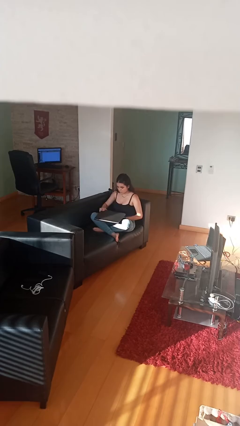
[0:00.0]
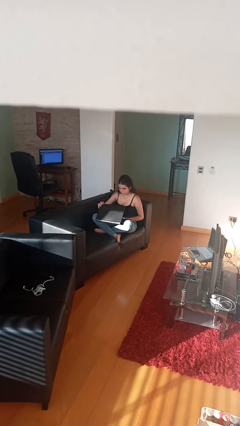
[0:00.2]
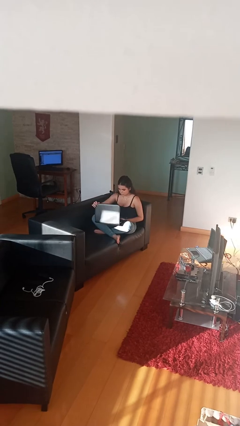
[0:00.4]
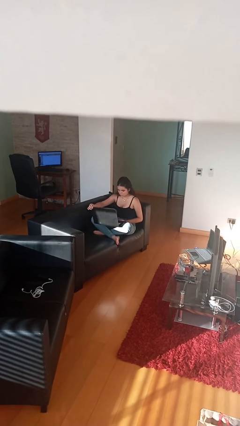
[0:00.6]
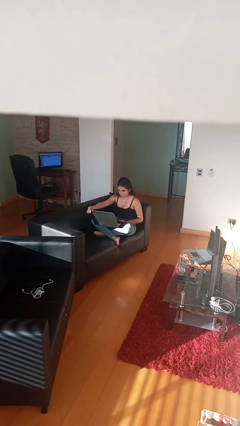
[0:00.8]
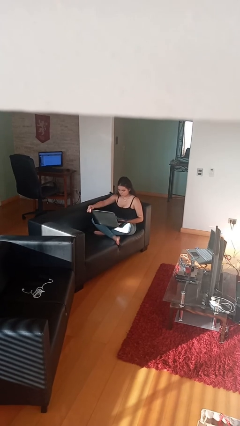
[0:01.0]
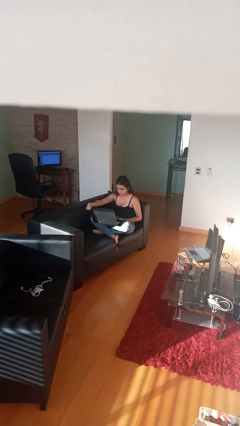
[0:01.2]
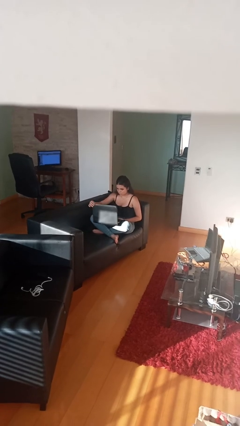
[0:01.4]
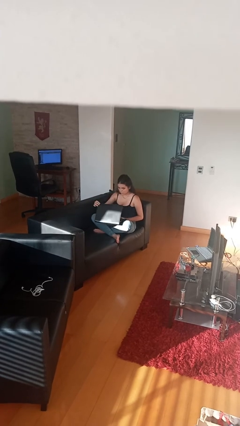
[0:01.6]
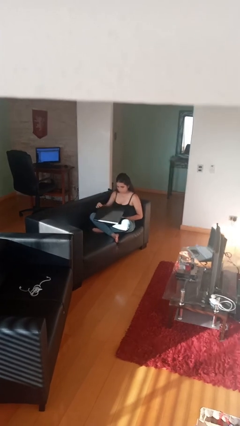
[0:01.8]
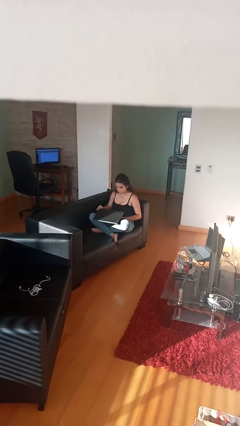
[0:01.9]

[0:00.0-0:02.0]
person interacts with laptop

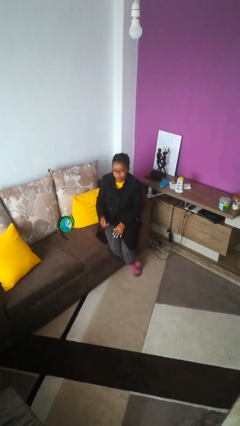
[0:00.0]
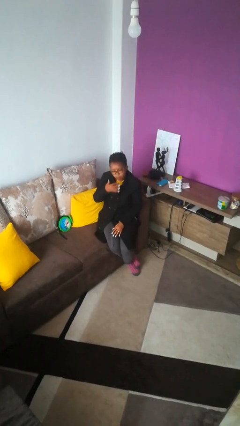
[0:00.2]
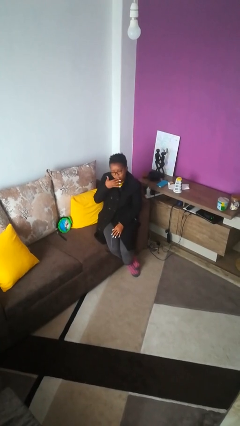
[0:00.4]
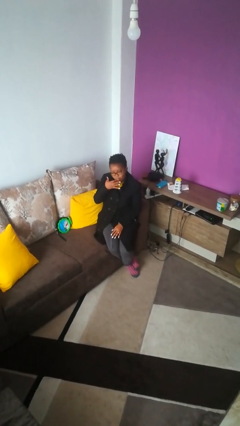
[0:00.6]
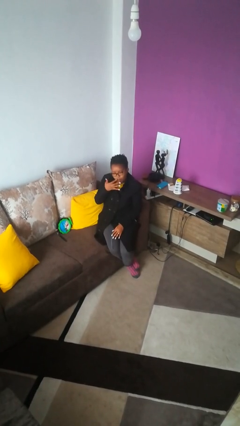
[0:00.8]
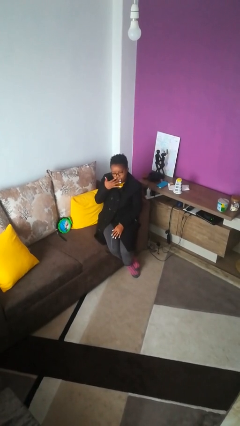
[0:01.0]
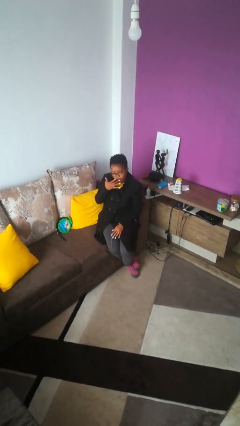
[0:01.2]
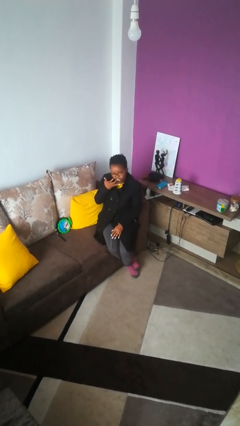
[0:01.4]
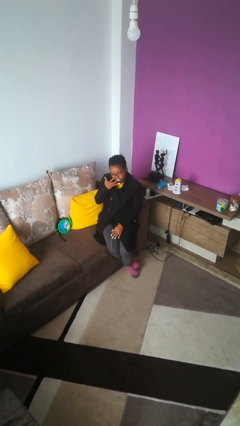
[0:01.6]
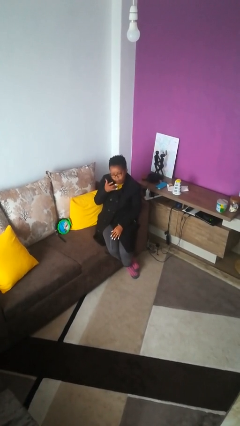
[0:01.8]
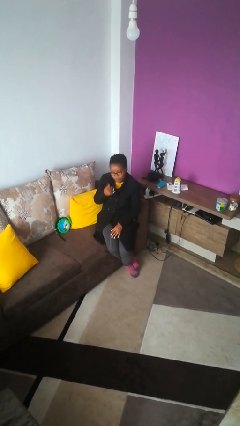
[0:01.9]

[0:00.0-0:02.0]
person licks fingers

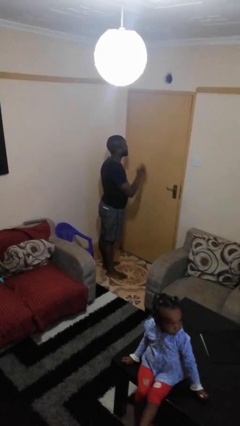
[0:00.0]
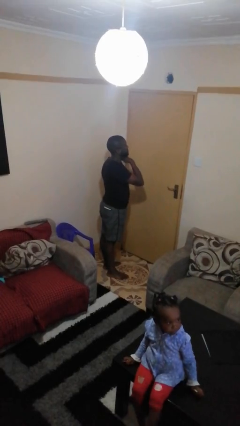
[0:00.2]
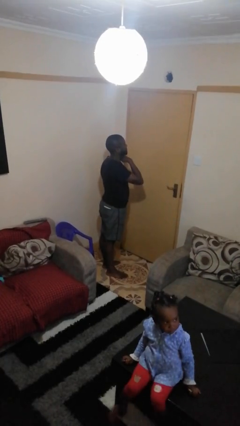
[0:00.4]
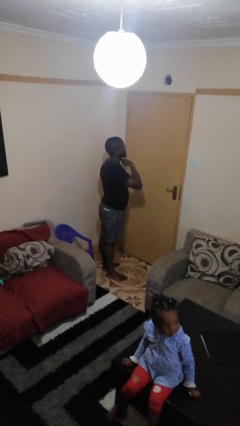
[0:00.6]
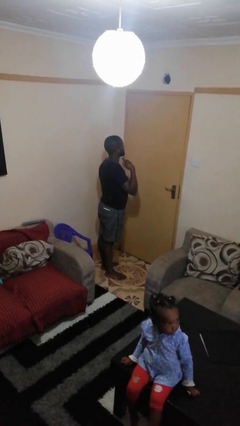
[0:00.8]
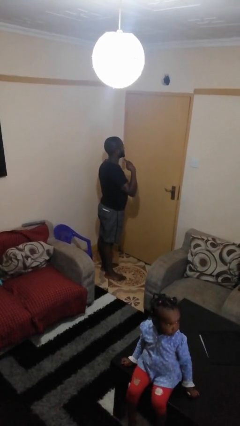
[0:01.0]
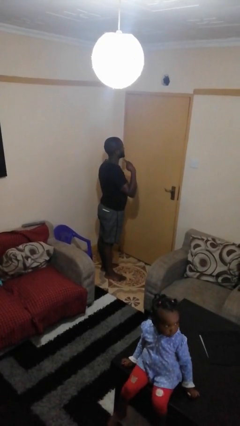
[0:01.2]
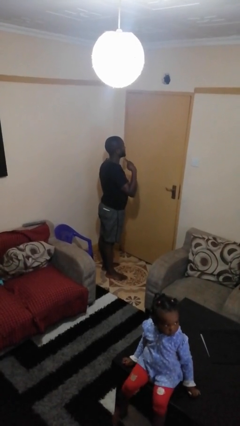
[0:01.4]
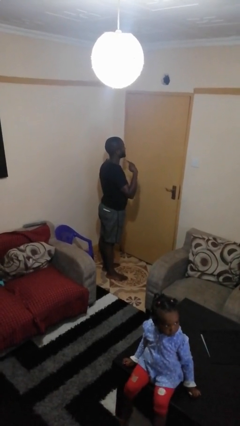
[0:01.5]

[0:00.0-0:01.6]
person gestures cut

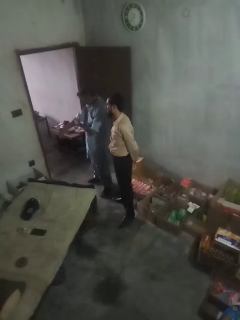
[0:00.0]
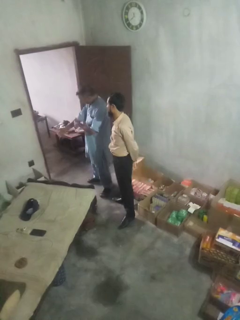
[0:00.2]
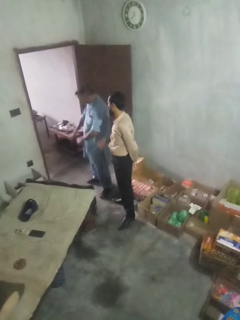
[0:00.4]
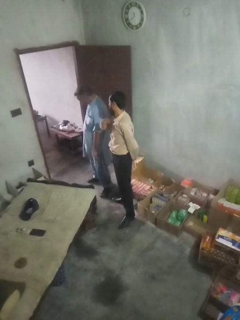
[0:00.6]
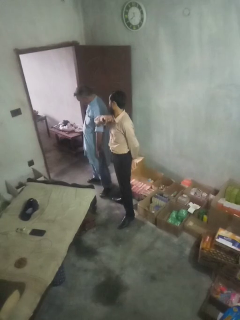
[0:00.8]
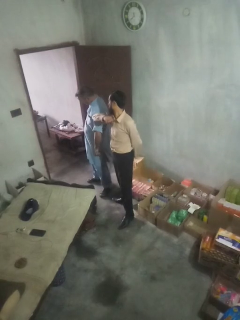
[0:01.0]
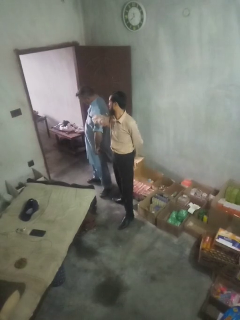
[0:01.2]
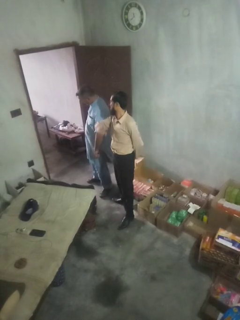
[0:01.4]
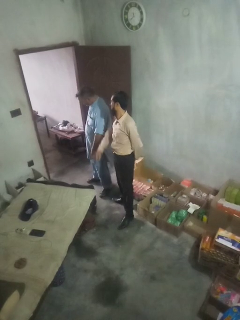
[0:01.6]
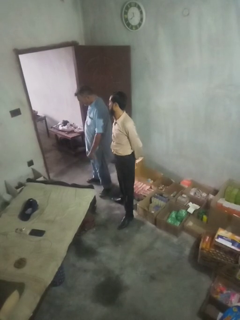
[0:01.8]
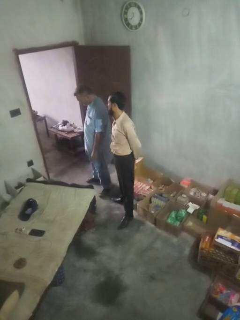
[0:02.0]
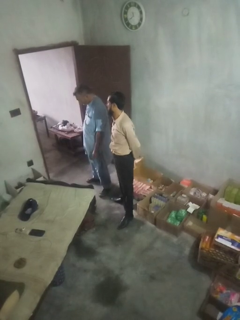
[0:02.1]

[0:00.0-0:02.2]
person nudges person with elbow

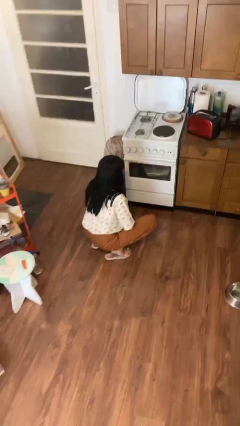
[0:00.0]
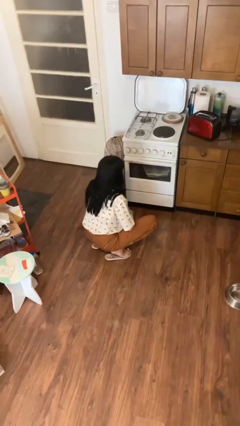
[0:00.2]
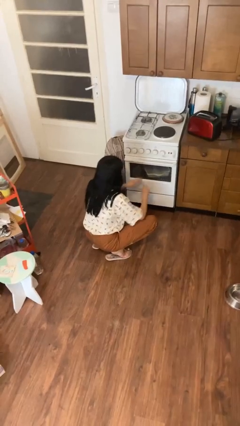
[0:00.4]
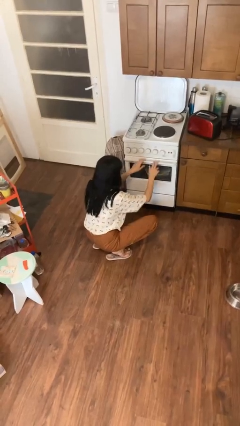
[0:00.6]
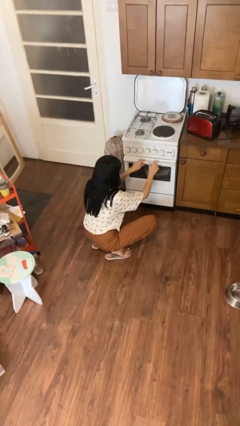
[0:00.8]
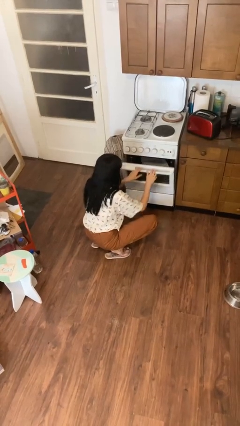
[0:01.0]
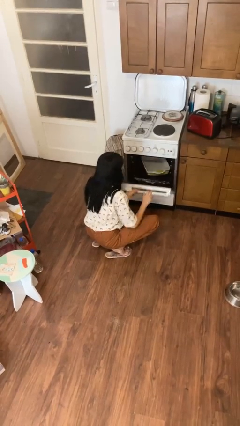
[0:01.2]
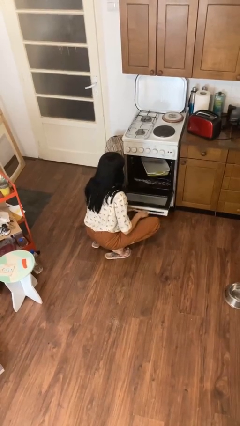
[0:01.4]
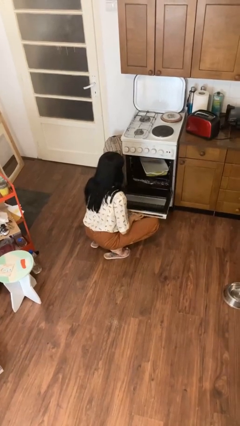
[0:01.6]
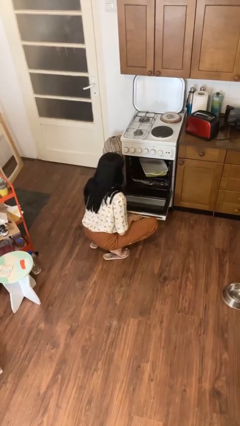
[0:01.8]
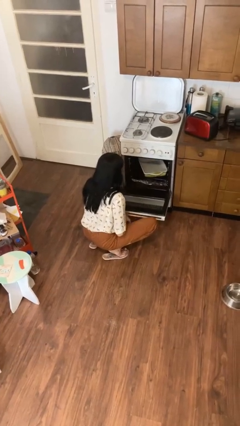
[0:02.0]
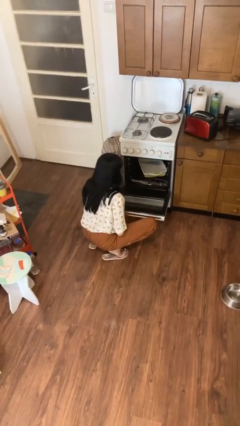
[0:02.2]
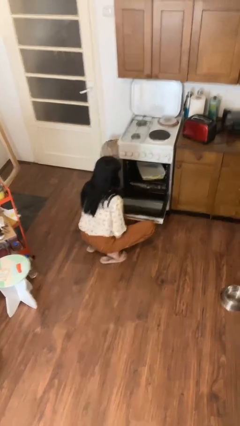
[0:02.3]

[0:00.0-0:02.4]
person opens oven door

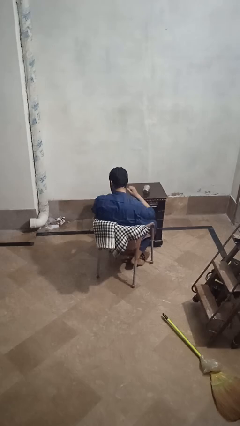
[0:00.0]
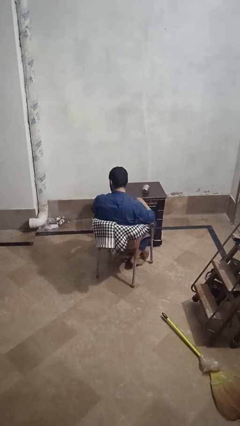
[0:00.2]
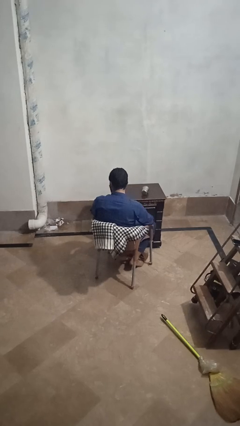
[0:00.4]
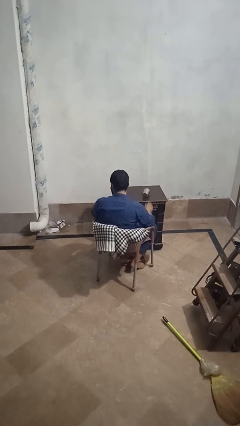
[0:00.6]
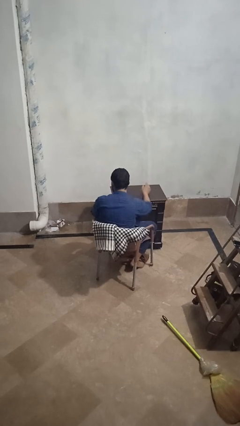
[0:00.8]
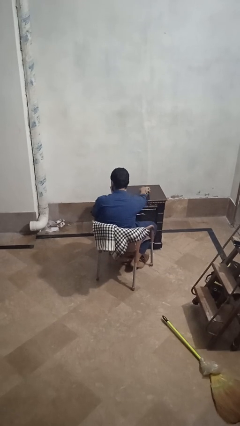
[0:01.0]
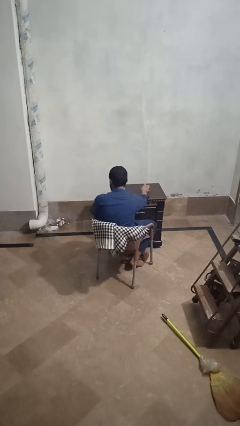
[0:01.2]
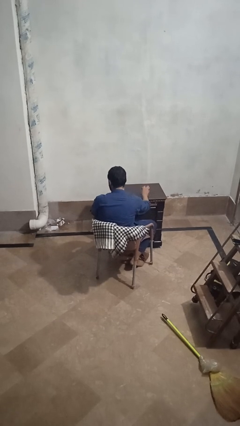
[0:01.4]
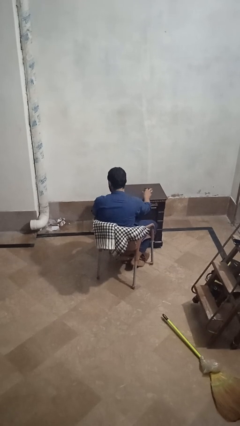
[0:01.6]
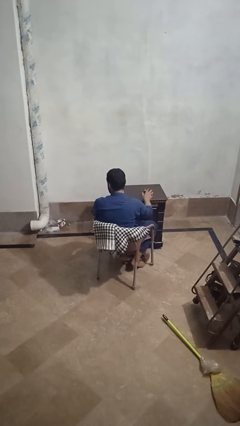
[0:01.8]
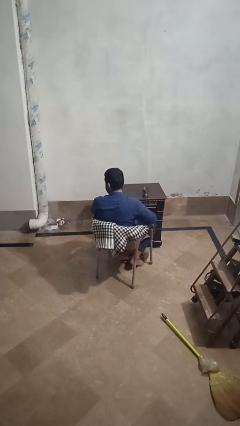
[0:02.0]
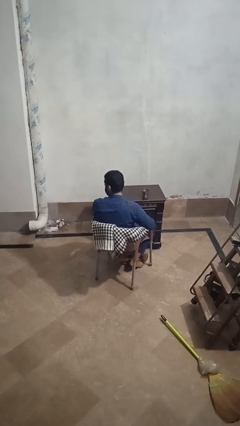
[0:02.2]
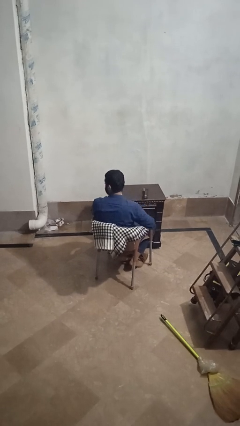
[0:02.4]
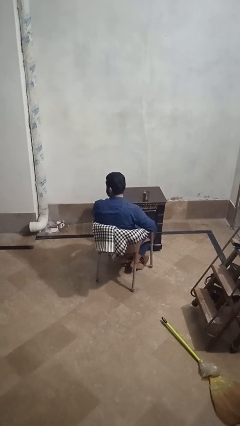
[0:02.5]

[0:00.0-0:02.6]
person sets upright glass

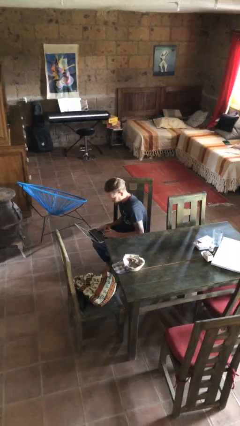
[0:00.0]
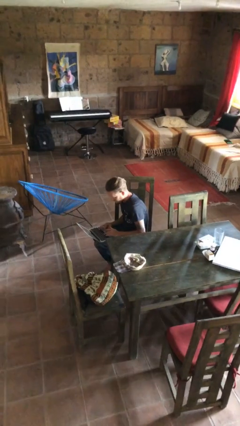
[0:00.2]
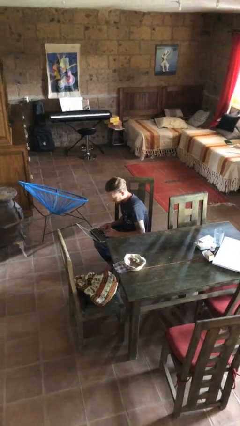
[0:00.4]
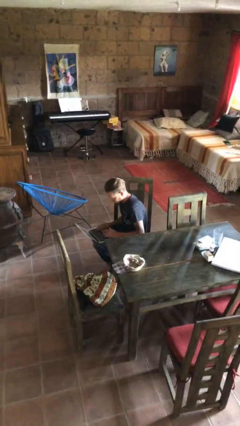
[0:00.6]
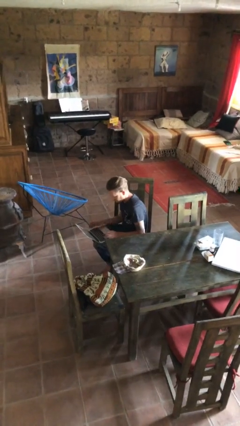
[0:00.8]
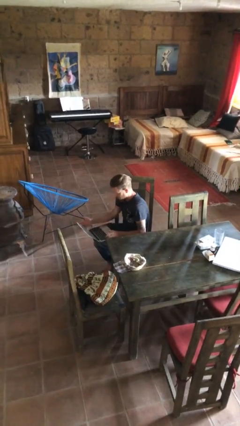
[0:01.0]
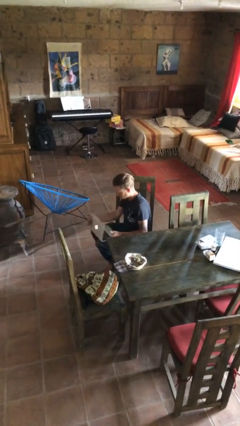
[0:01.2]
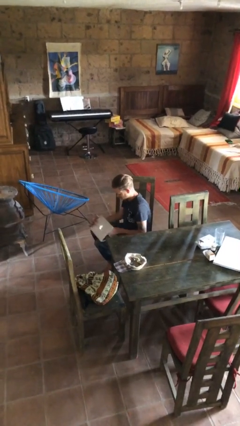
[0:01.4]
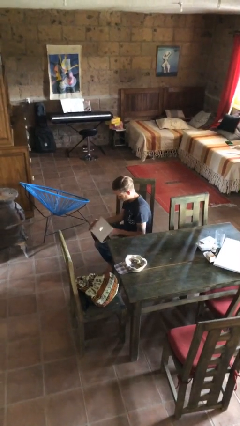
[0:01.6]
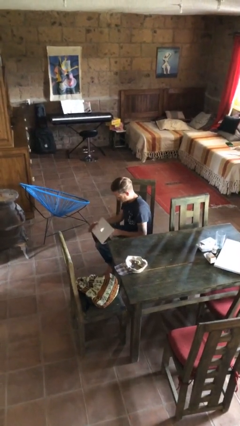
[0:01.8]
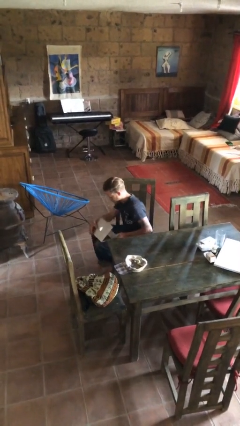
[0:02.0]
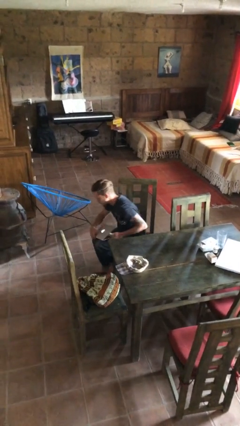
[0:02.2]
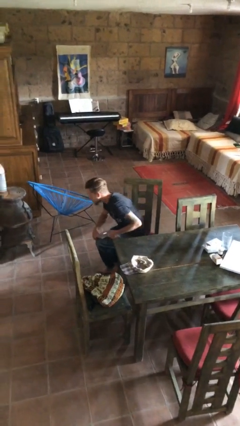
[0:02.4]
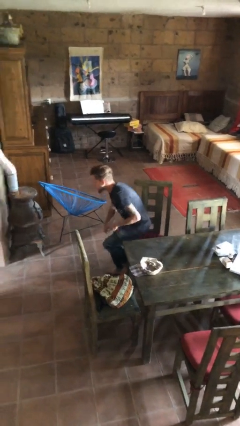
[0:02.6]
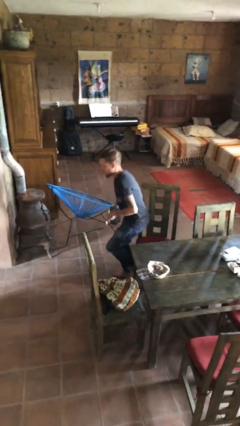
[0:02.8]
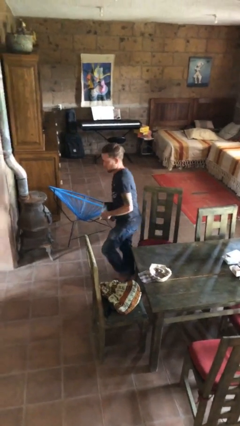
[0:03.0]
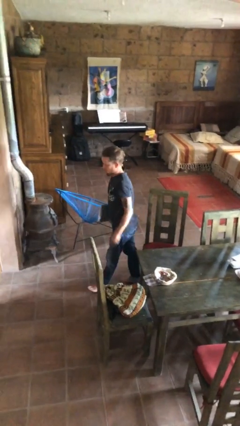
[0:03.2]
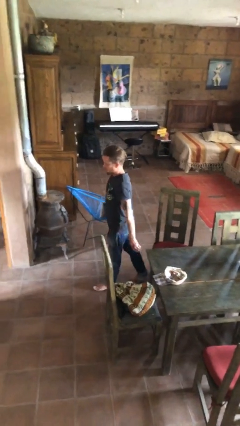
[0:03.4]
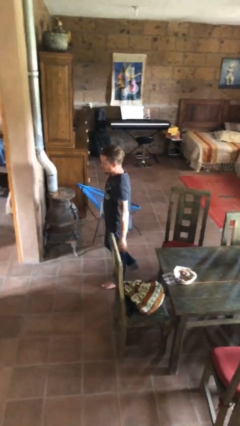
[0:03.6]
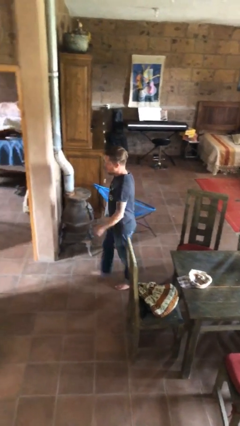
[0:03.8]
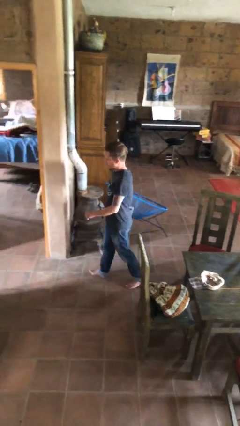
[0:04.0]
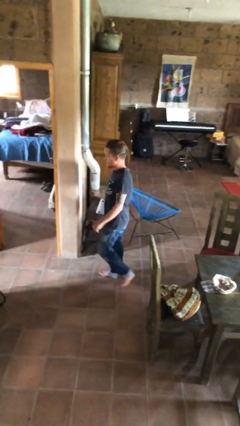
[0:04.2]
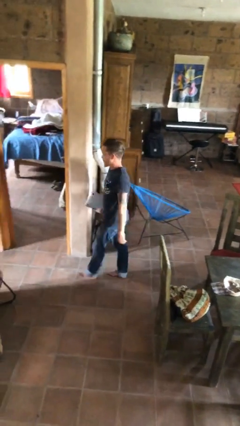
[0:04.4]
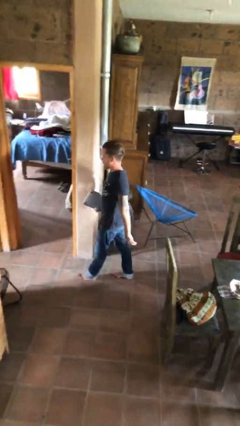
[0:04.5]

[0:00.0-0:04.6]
person stands up

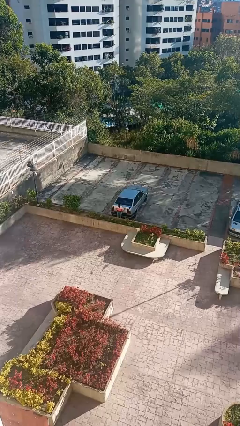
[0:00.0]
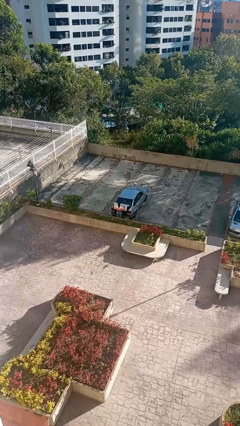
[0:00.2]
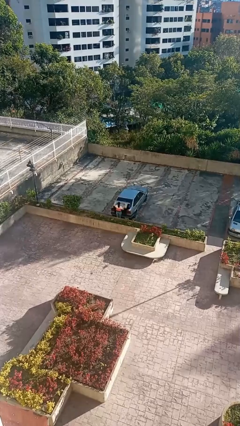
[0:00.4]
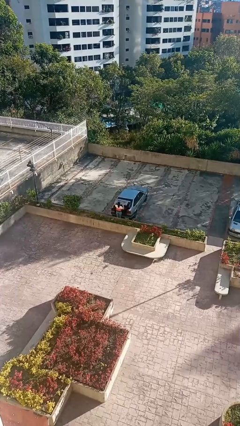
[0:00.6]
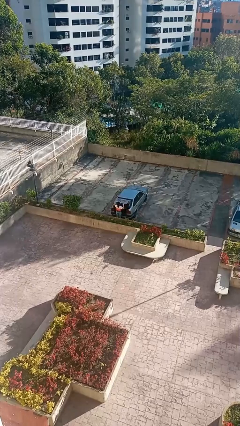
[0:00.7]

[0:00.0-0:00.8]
person opens car trunk
